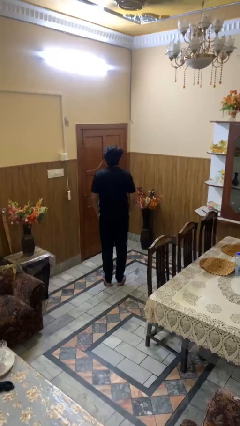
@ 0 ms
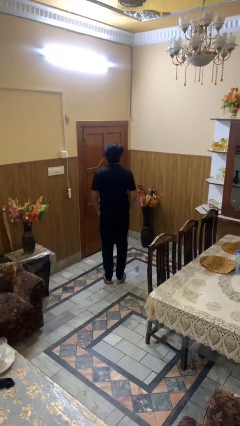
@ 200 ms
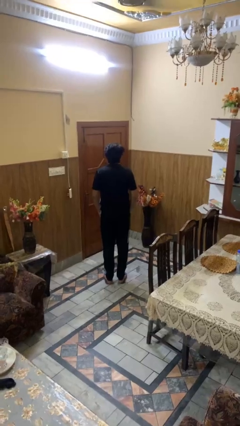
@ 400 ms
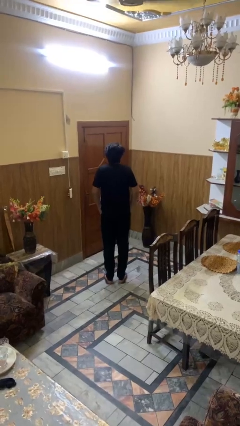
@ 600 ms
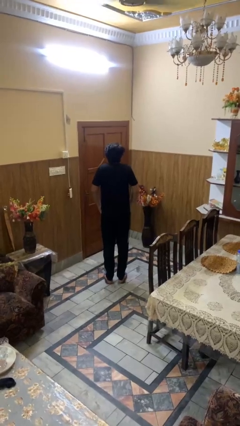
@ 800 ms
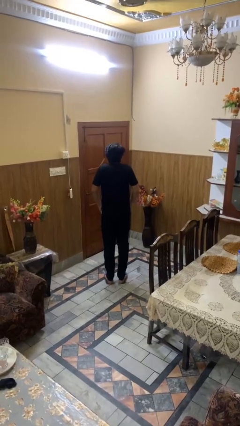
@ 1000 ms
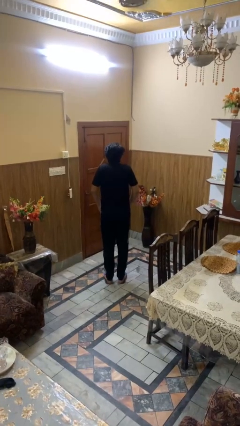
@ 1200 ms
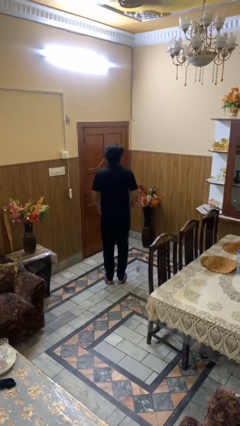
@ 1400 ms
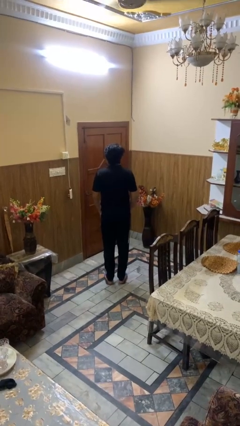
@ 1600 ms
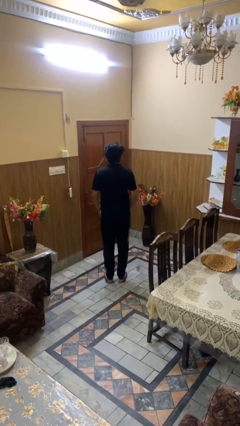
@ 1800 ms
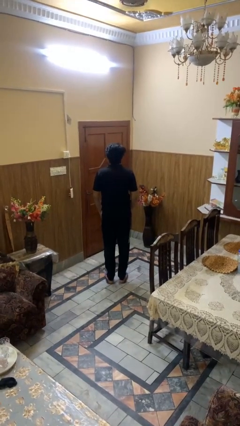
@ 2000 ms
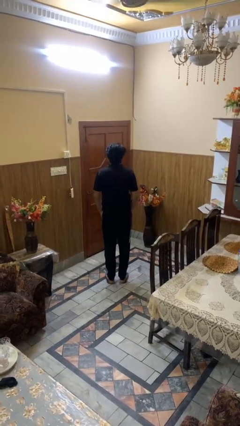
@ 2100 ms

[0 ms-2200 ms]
person shrugs

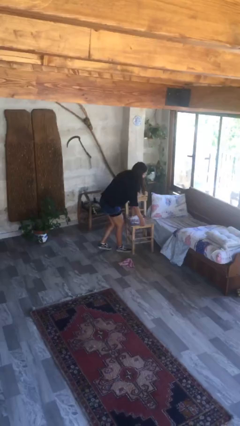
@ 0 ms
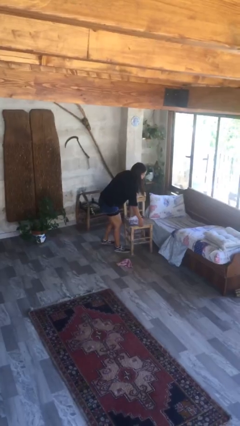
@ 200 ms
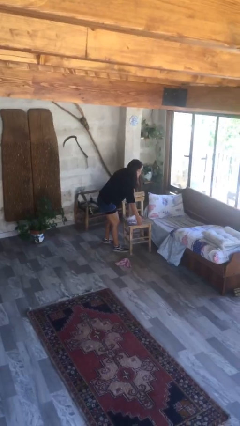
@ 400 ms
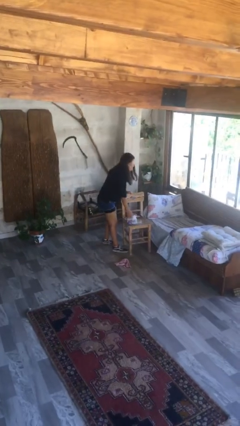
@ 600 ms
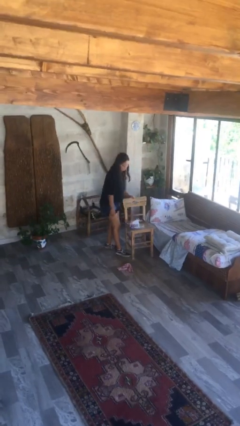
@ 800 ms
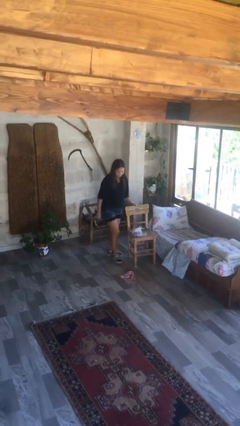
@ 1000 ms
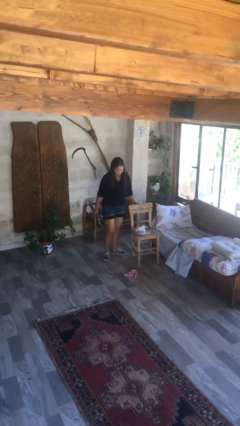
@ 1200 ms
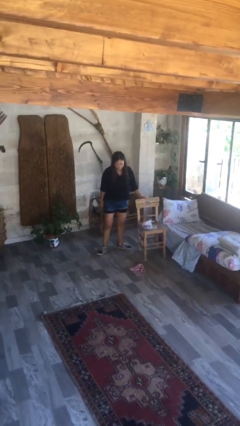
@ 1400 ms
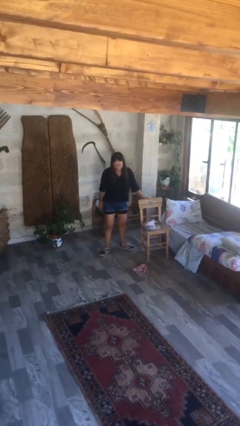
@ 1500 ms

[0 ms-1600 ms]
person puts down object on floor

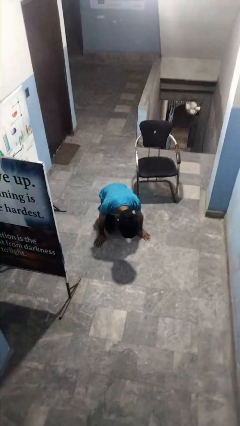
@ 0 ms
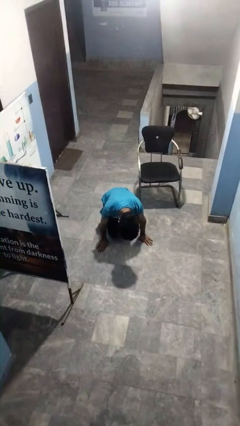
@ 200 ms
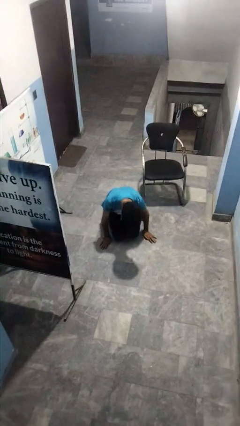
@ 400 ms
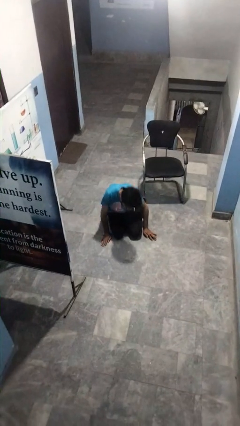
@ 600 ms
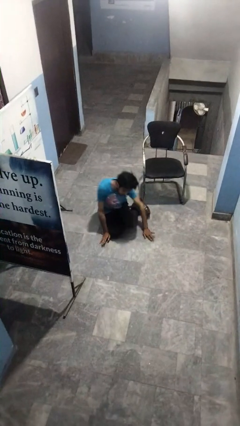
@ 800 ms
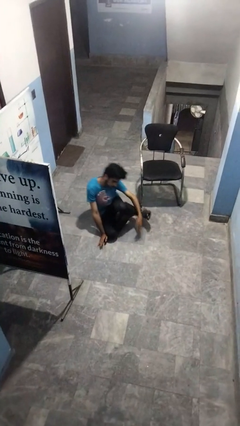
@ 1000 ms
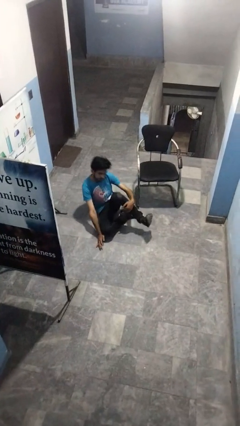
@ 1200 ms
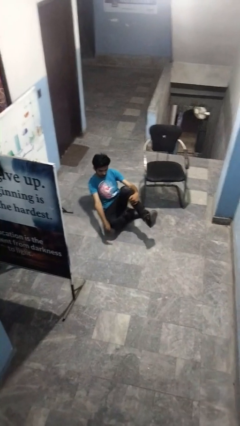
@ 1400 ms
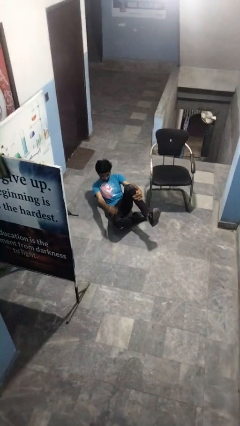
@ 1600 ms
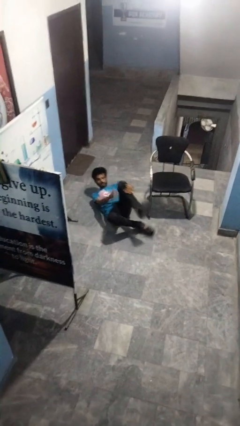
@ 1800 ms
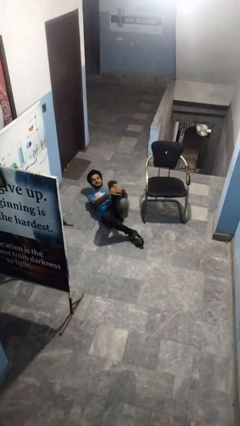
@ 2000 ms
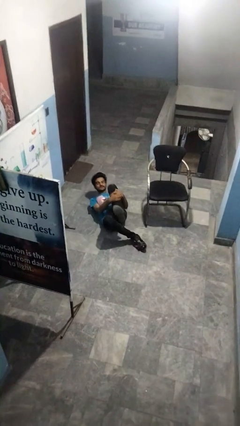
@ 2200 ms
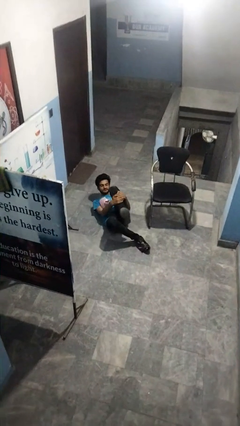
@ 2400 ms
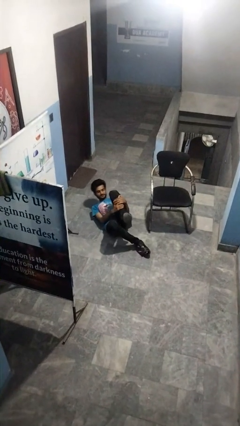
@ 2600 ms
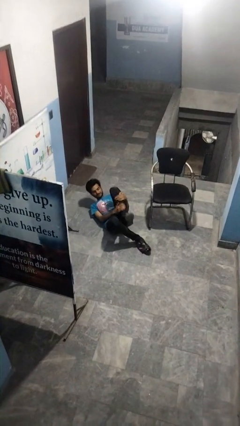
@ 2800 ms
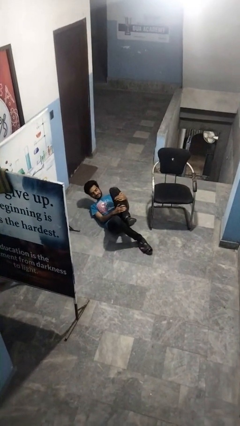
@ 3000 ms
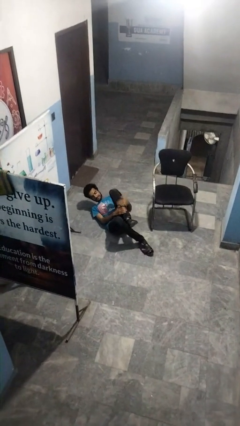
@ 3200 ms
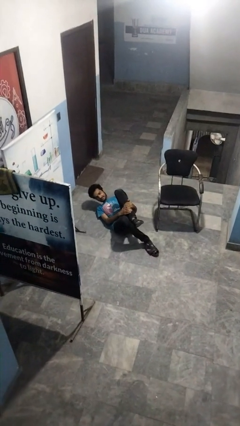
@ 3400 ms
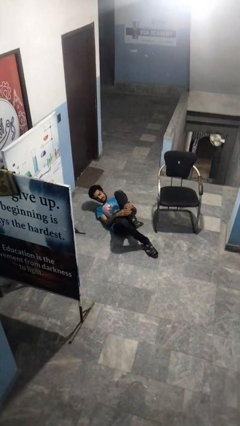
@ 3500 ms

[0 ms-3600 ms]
person lies down on floor

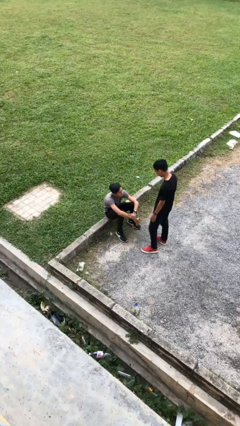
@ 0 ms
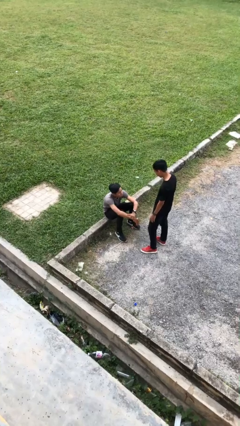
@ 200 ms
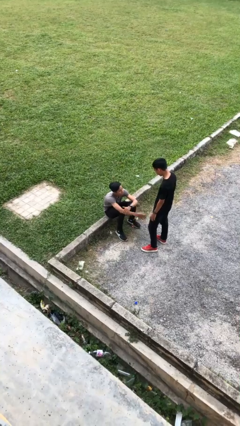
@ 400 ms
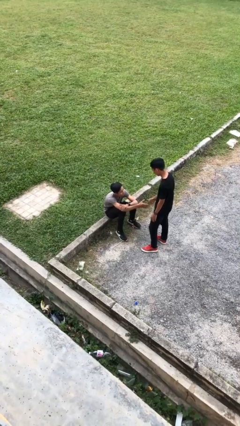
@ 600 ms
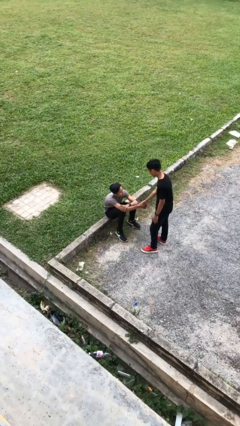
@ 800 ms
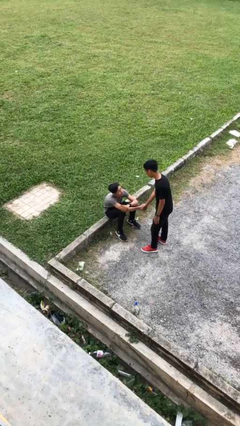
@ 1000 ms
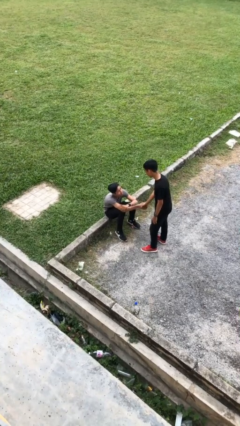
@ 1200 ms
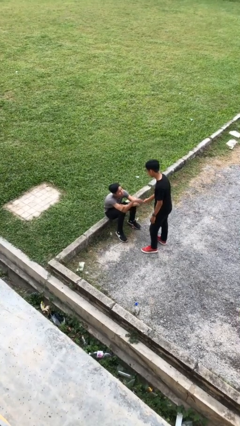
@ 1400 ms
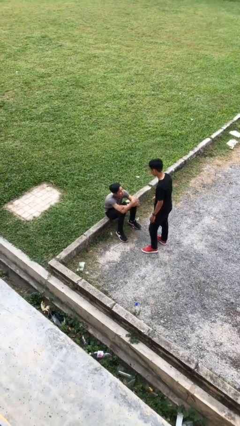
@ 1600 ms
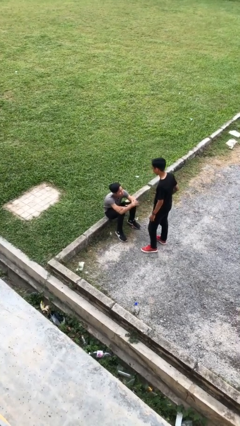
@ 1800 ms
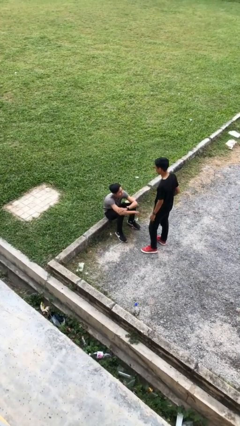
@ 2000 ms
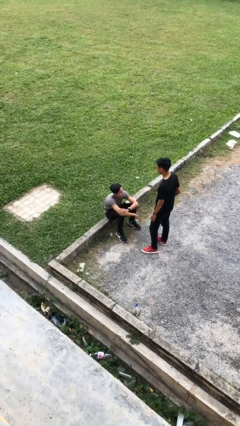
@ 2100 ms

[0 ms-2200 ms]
person shakes hand

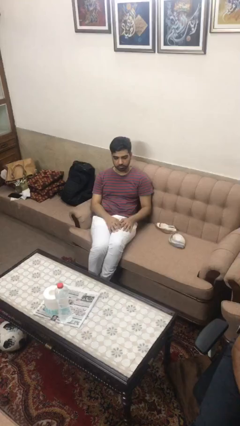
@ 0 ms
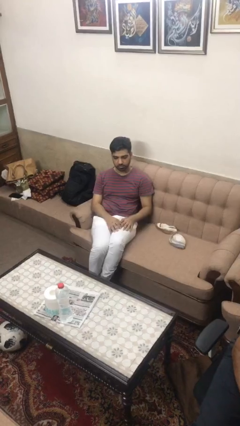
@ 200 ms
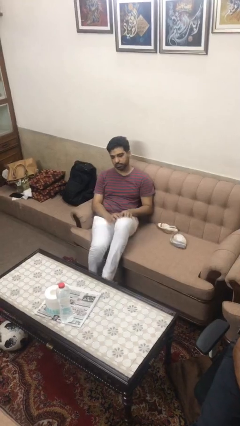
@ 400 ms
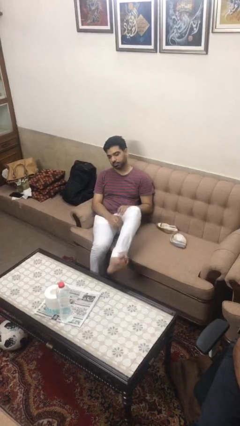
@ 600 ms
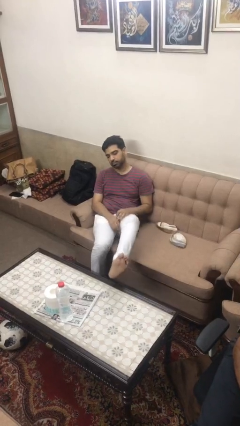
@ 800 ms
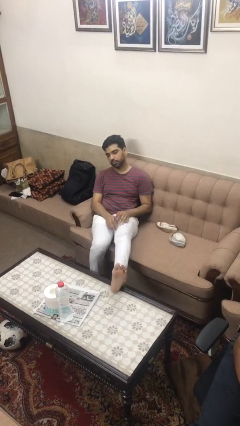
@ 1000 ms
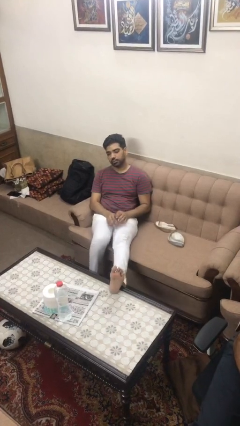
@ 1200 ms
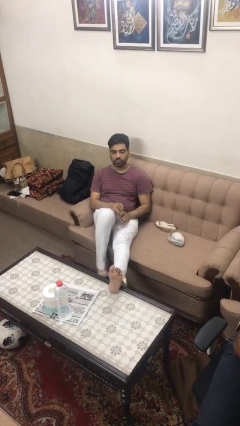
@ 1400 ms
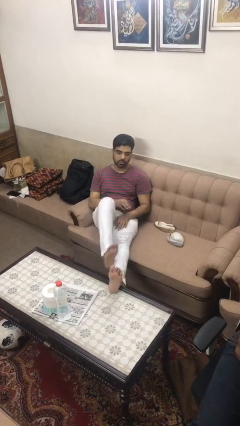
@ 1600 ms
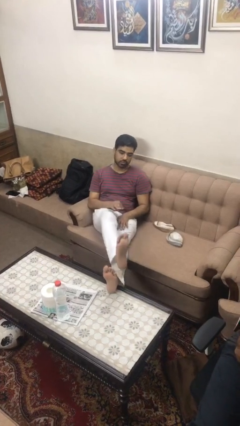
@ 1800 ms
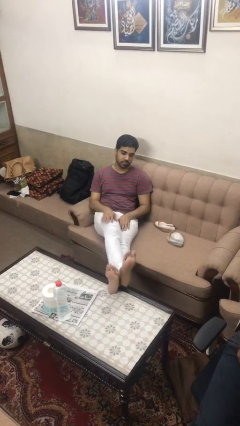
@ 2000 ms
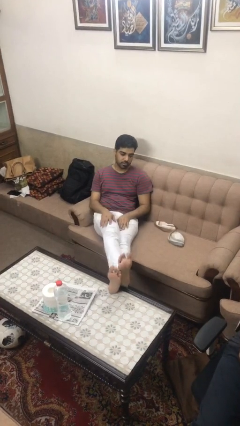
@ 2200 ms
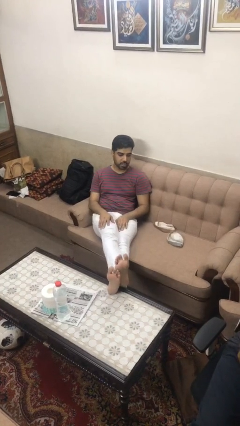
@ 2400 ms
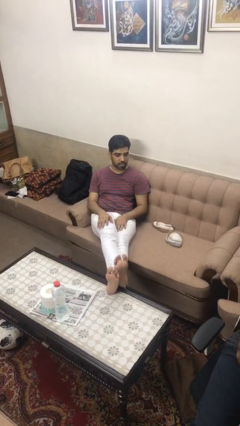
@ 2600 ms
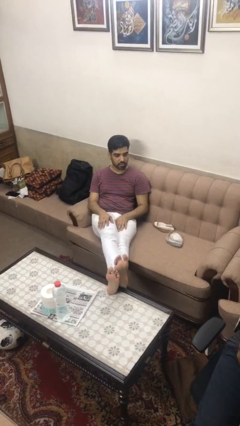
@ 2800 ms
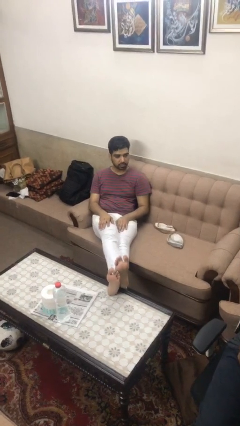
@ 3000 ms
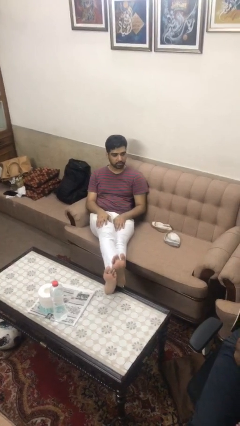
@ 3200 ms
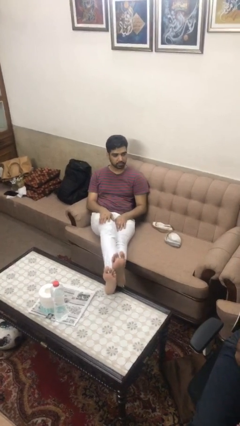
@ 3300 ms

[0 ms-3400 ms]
person puts feet up

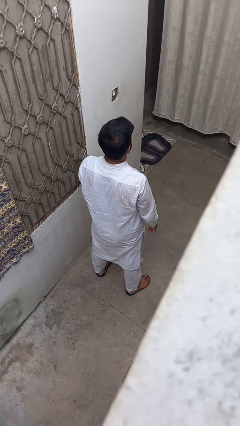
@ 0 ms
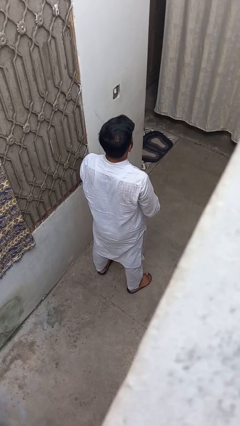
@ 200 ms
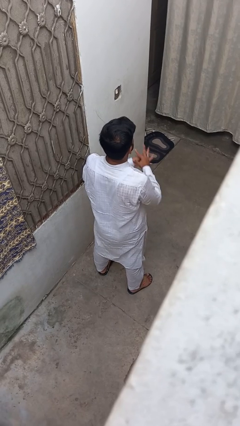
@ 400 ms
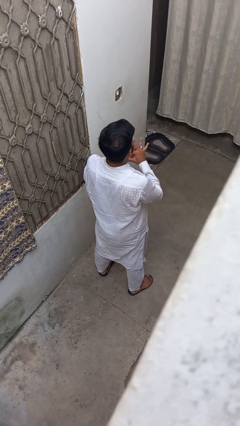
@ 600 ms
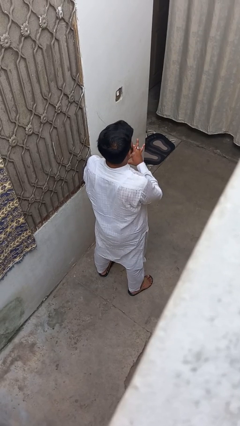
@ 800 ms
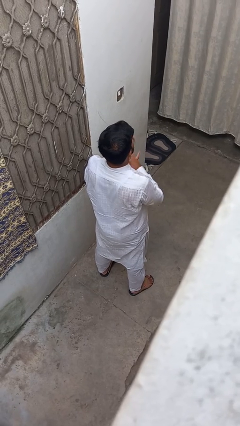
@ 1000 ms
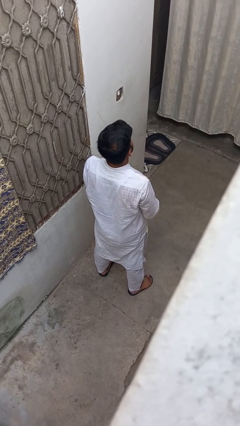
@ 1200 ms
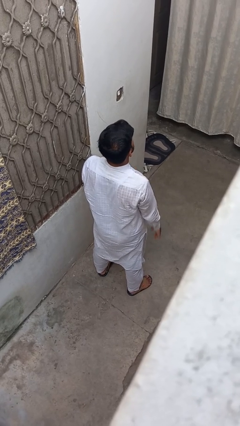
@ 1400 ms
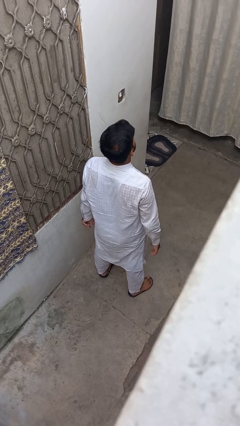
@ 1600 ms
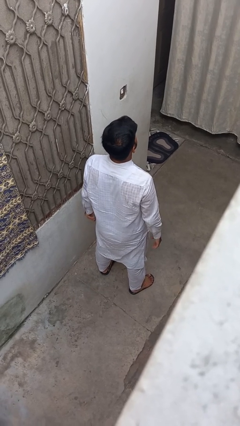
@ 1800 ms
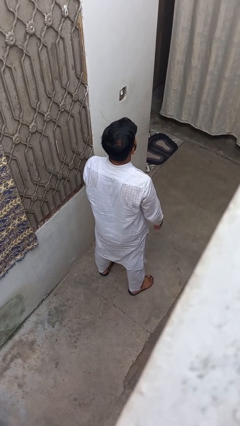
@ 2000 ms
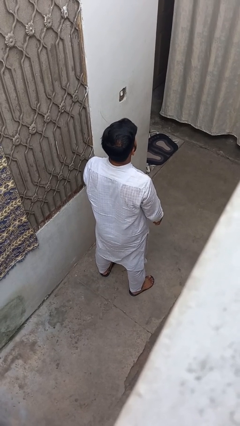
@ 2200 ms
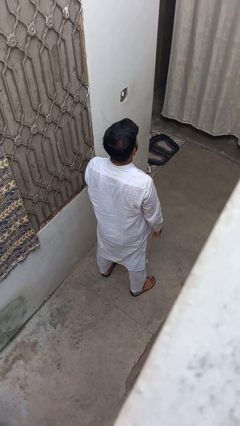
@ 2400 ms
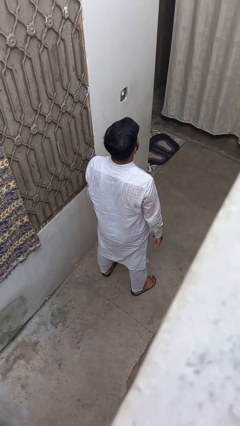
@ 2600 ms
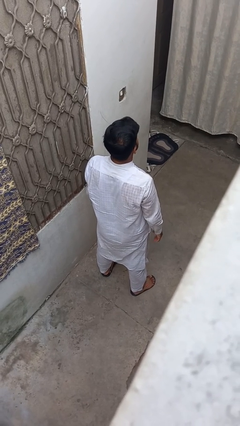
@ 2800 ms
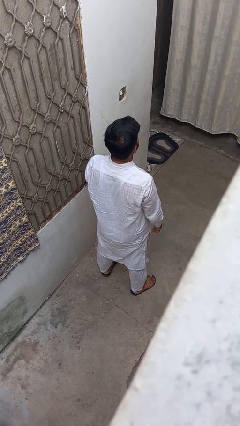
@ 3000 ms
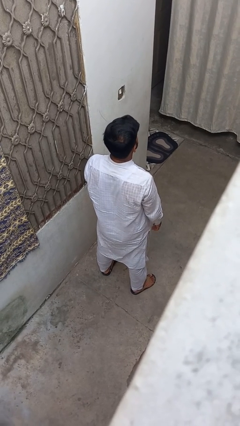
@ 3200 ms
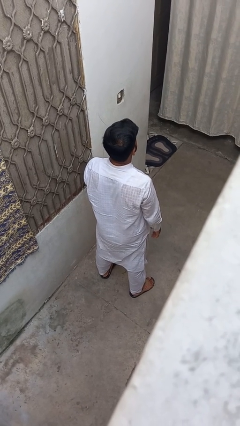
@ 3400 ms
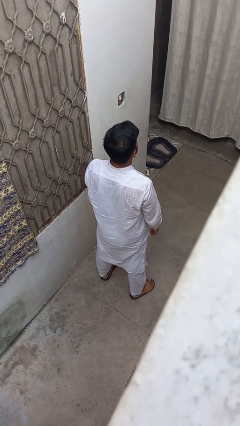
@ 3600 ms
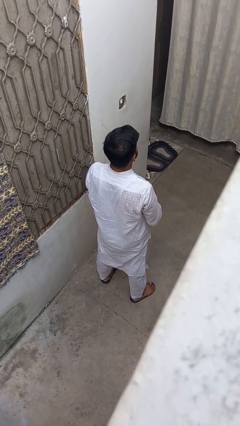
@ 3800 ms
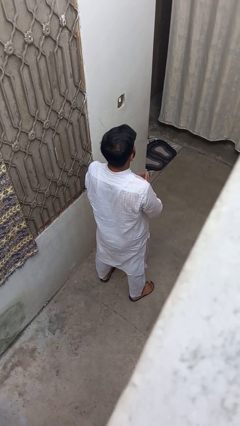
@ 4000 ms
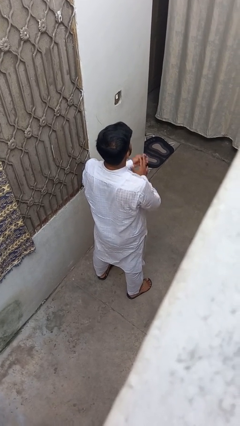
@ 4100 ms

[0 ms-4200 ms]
person takes off ring
